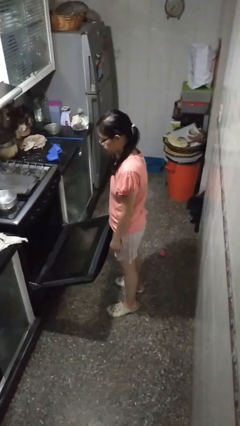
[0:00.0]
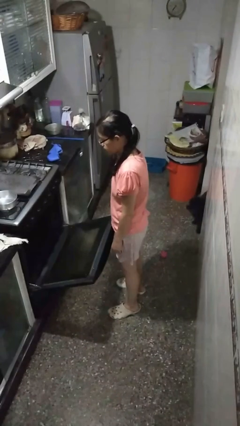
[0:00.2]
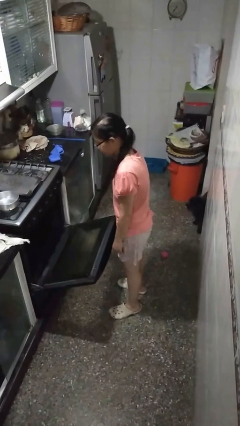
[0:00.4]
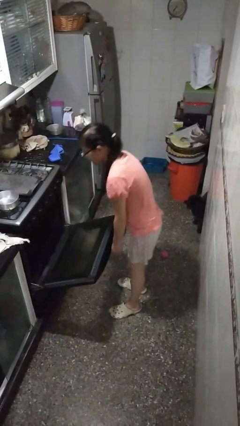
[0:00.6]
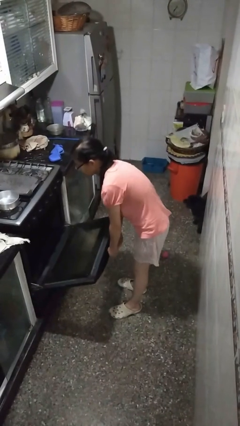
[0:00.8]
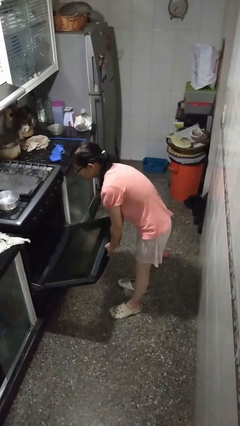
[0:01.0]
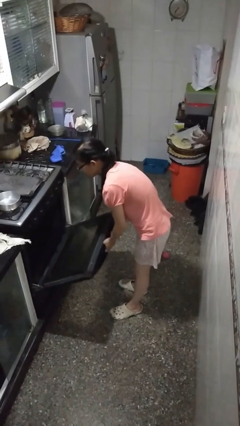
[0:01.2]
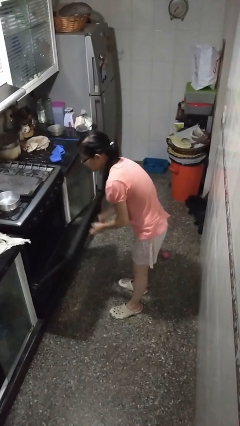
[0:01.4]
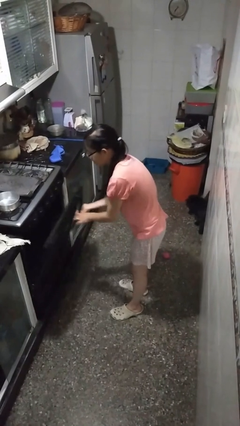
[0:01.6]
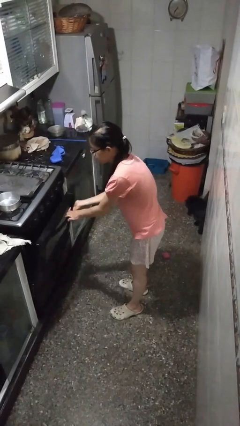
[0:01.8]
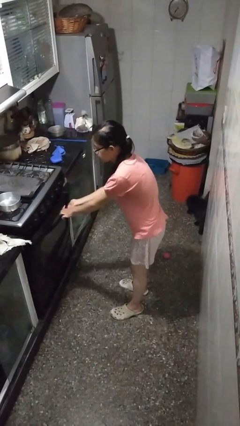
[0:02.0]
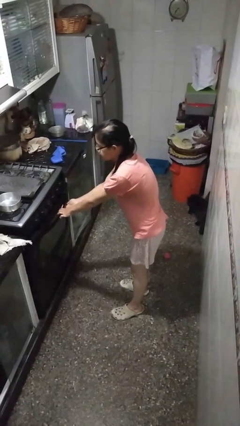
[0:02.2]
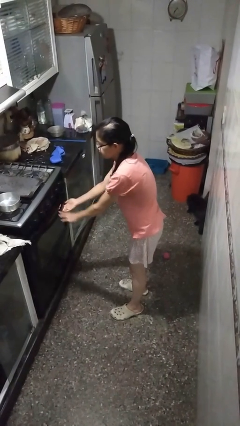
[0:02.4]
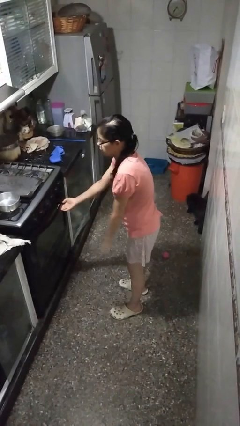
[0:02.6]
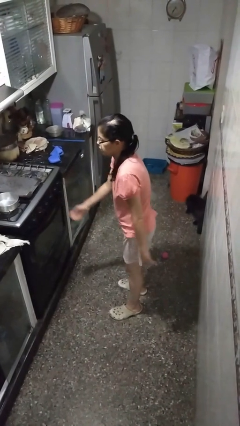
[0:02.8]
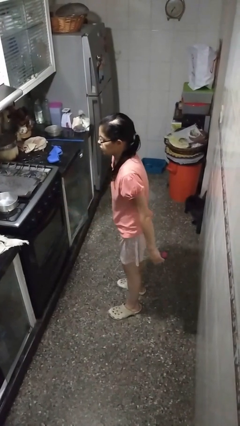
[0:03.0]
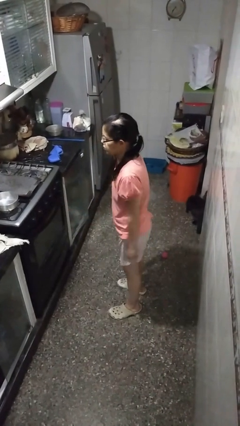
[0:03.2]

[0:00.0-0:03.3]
person closes oven door

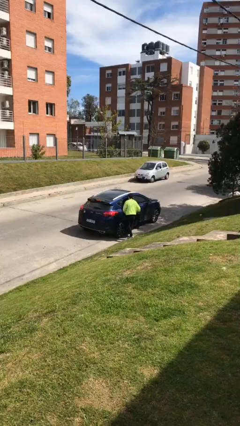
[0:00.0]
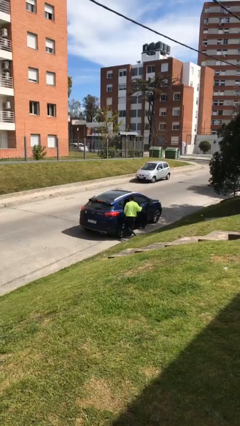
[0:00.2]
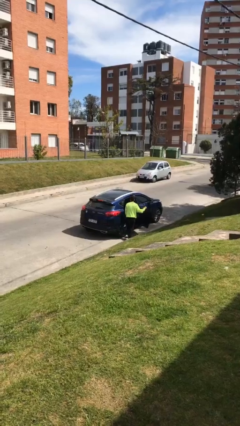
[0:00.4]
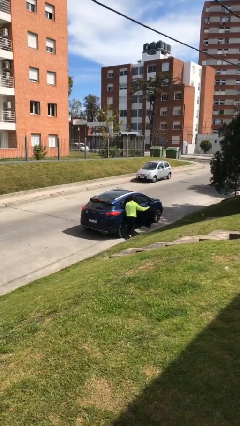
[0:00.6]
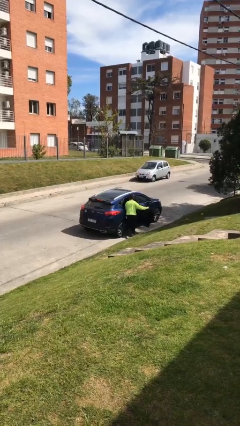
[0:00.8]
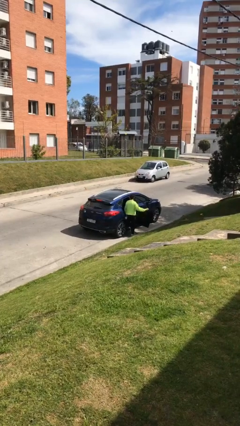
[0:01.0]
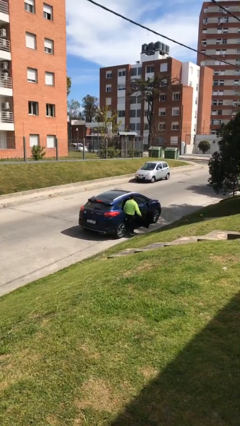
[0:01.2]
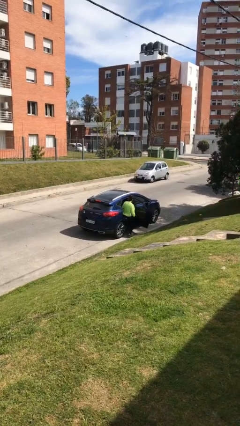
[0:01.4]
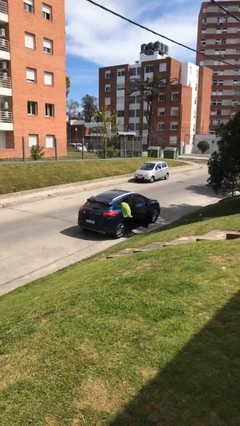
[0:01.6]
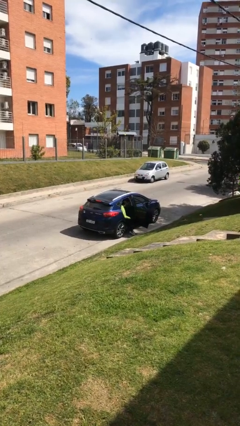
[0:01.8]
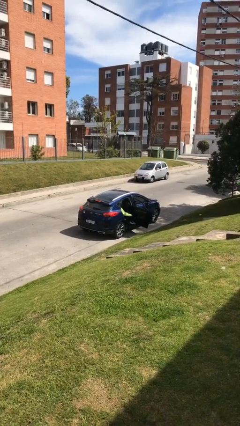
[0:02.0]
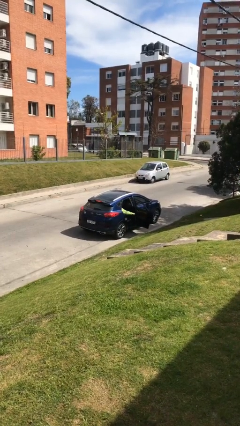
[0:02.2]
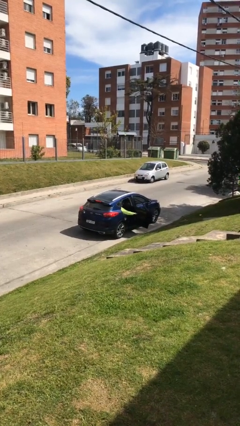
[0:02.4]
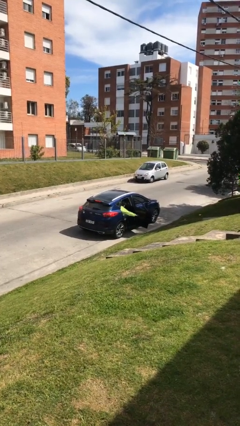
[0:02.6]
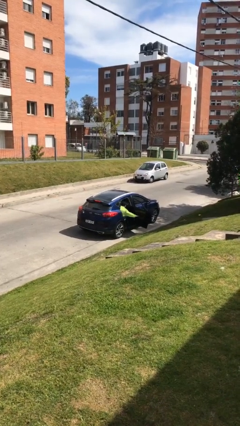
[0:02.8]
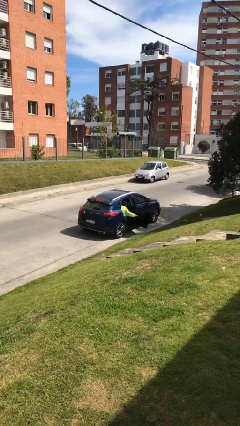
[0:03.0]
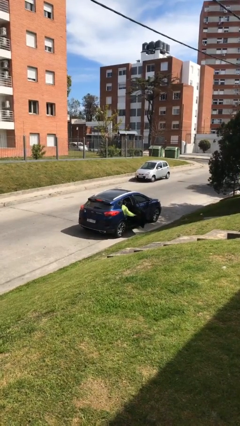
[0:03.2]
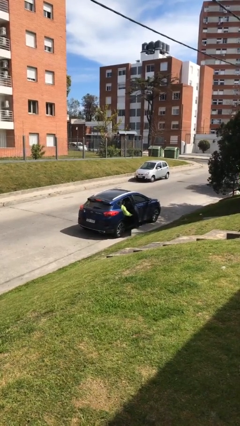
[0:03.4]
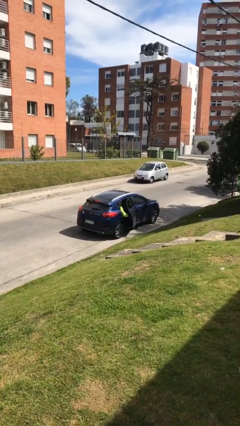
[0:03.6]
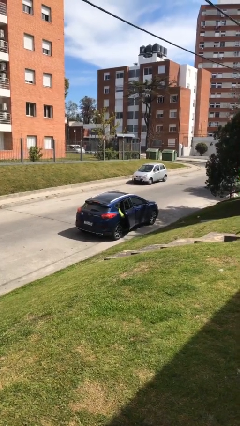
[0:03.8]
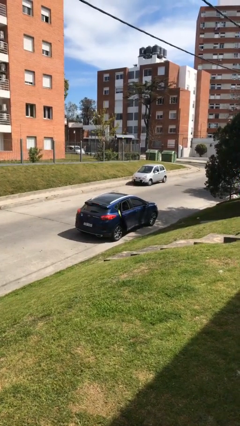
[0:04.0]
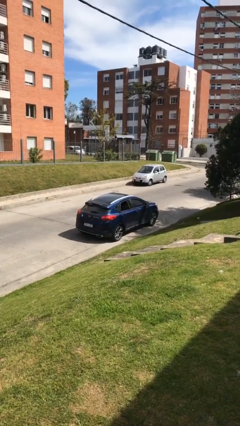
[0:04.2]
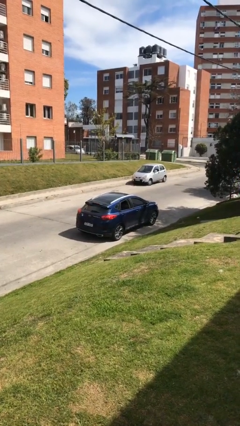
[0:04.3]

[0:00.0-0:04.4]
car picks up person

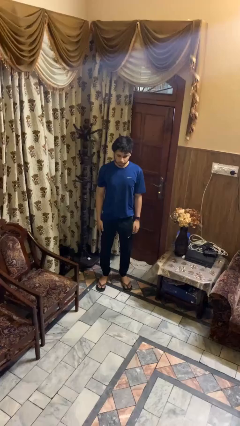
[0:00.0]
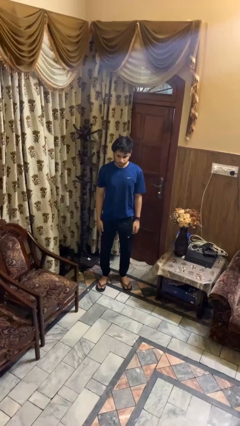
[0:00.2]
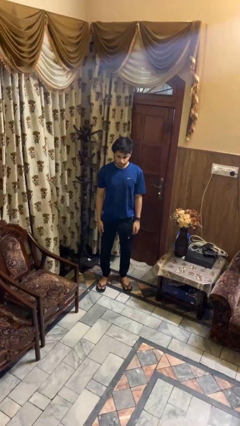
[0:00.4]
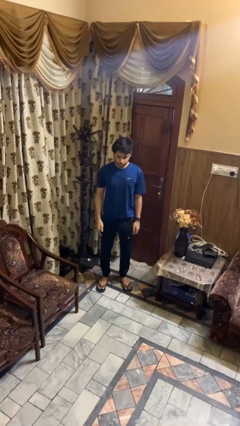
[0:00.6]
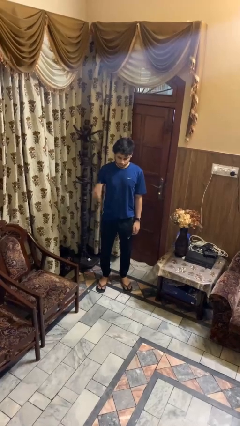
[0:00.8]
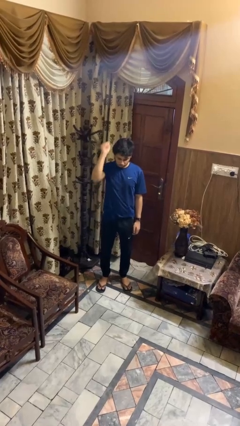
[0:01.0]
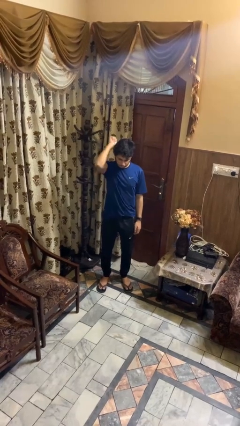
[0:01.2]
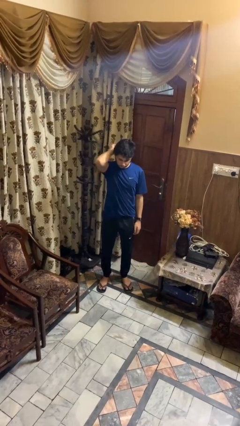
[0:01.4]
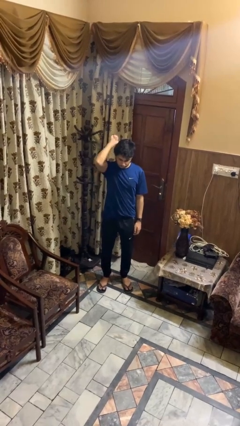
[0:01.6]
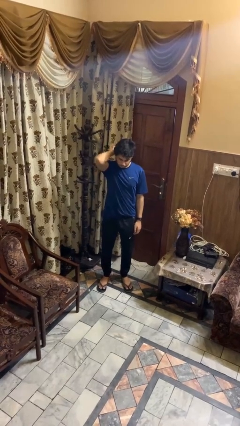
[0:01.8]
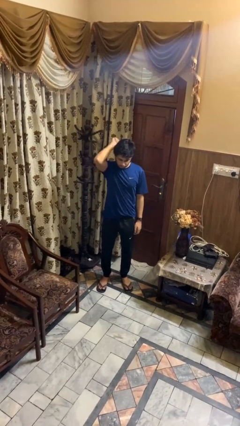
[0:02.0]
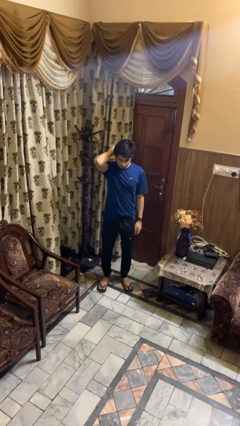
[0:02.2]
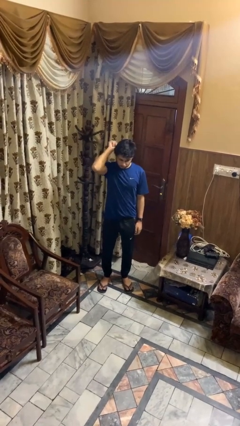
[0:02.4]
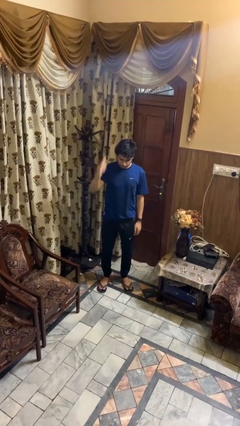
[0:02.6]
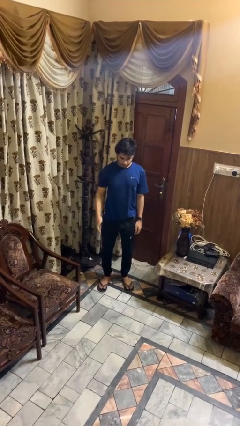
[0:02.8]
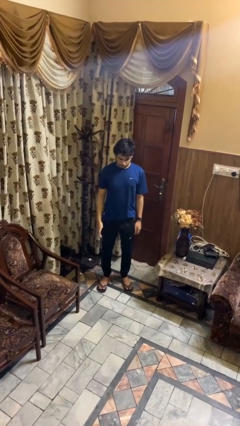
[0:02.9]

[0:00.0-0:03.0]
person gestures behind me

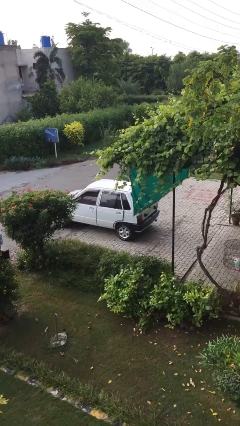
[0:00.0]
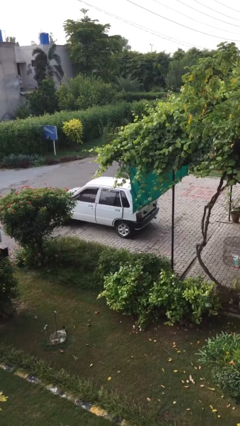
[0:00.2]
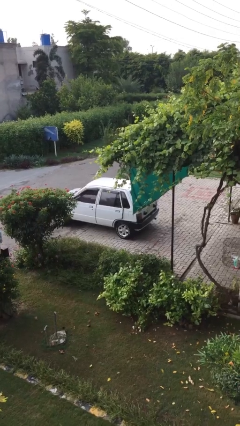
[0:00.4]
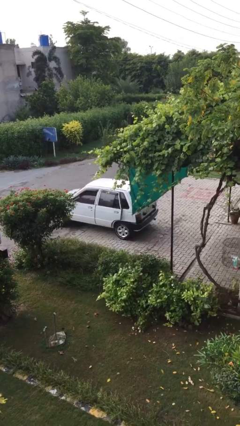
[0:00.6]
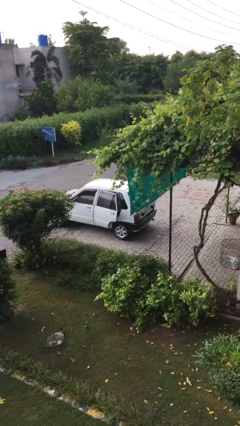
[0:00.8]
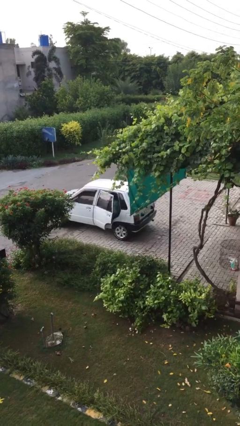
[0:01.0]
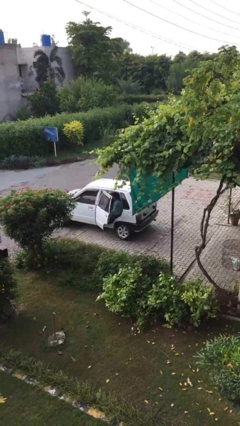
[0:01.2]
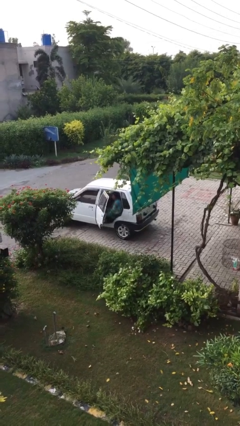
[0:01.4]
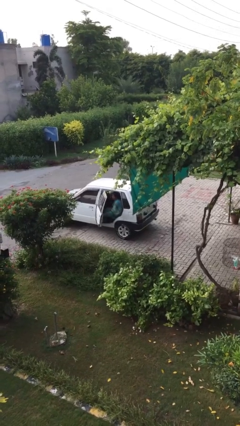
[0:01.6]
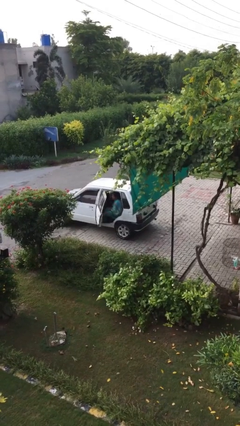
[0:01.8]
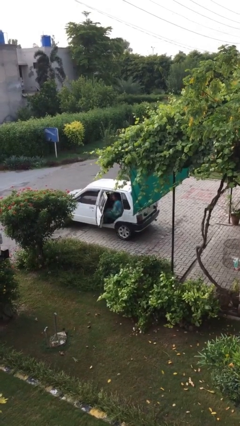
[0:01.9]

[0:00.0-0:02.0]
person opens car door

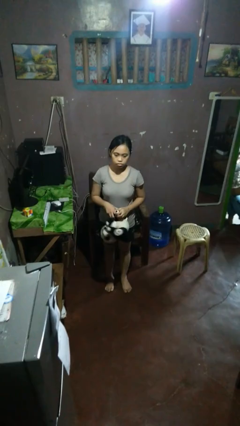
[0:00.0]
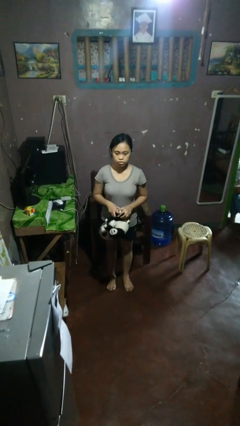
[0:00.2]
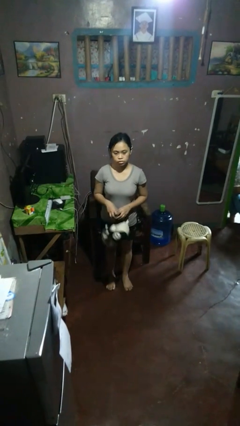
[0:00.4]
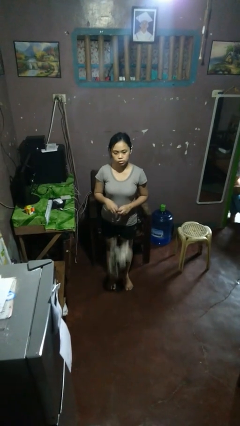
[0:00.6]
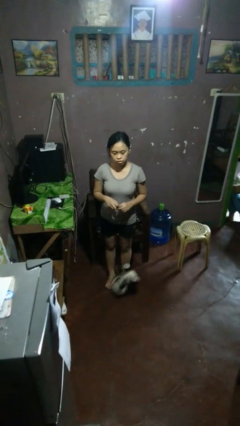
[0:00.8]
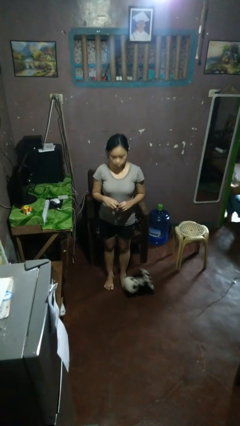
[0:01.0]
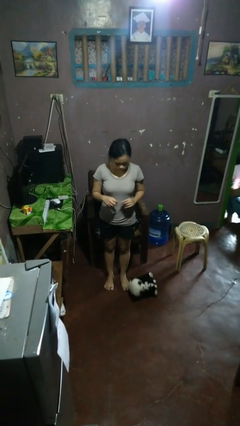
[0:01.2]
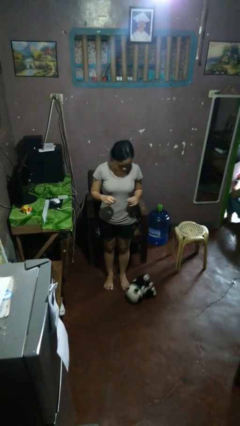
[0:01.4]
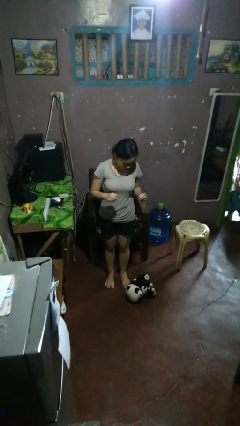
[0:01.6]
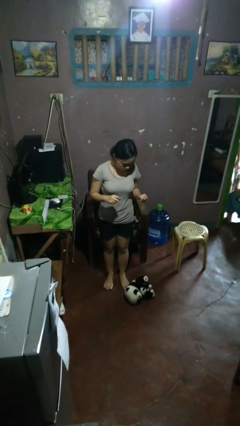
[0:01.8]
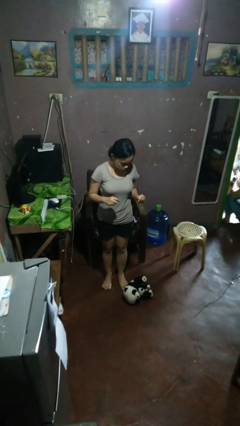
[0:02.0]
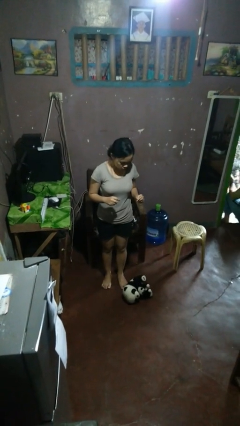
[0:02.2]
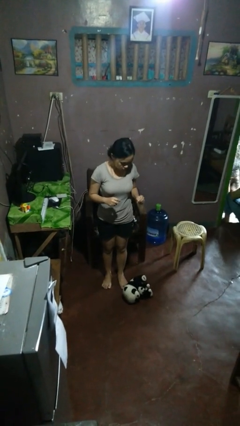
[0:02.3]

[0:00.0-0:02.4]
person drops object

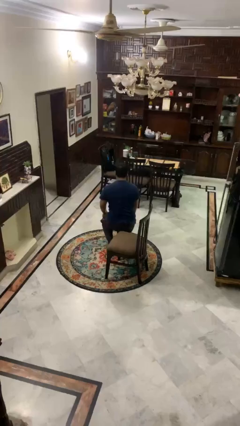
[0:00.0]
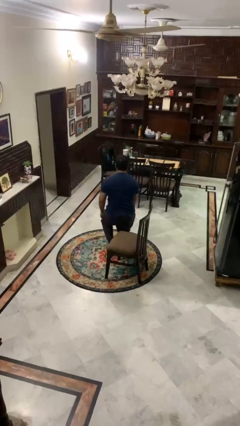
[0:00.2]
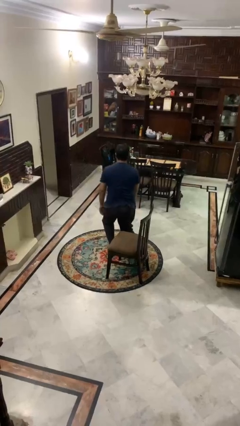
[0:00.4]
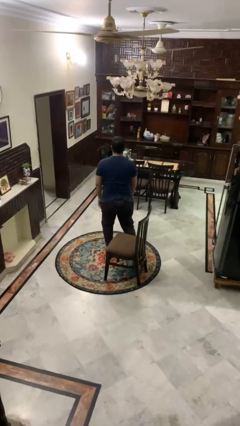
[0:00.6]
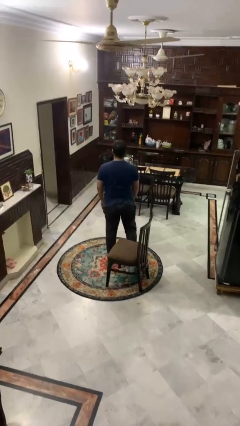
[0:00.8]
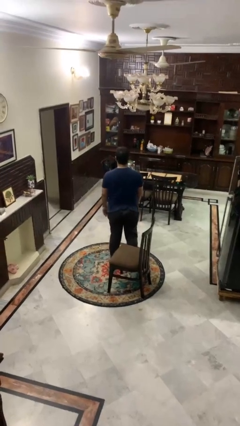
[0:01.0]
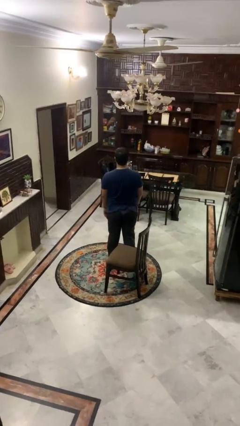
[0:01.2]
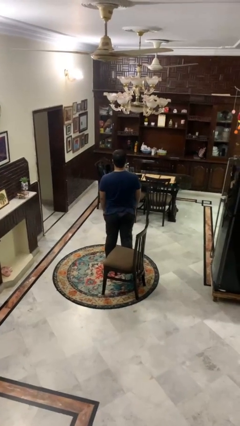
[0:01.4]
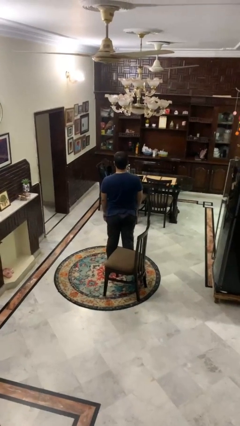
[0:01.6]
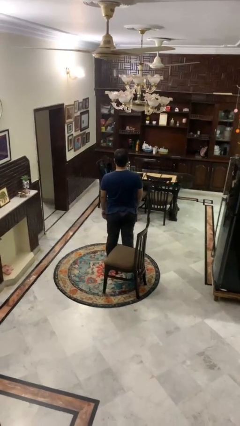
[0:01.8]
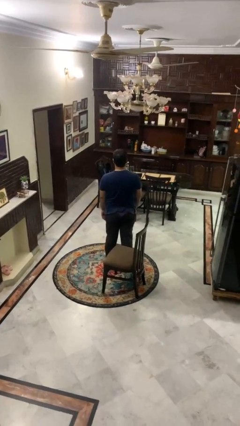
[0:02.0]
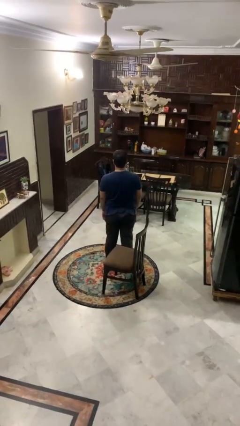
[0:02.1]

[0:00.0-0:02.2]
person stands up from floor

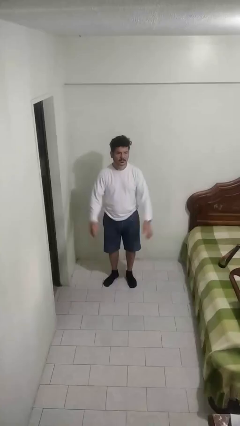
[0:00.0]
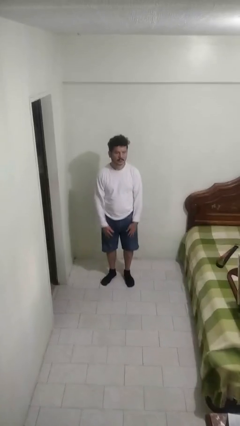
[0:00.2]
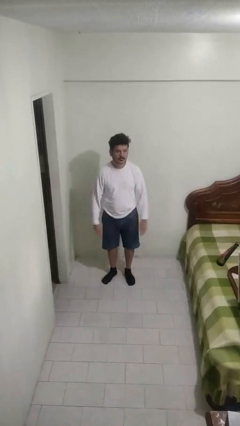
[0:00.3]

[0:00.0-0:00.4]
person slaps hands on thighs
